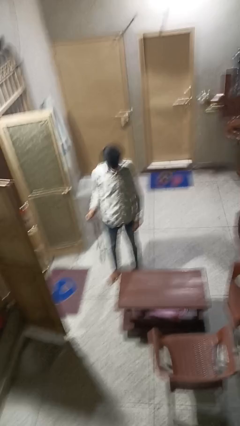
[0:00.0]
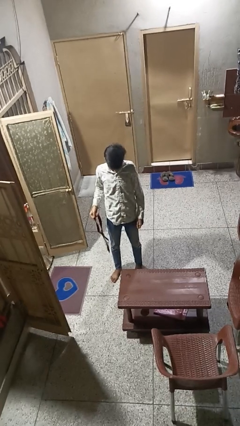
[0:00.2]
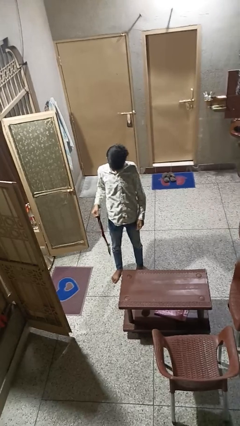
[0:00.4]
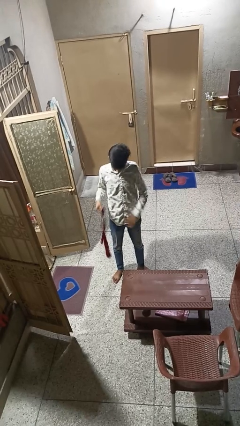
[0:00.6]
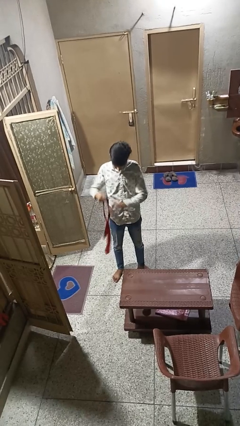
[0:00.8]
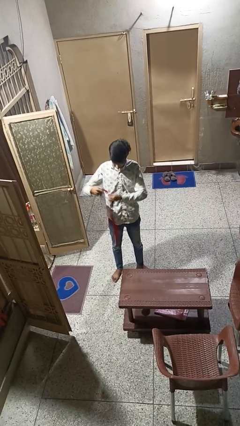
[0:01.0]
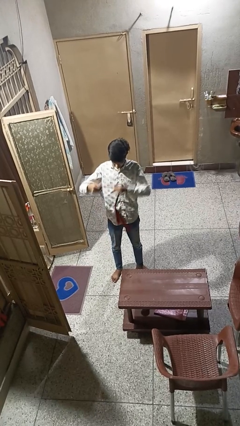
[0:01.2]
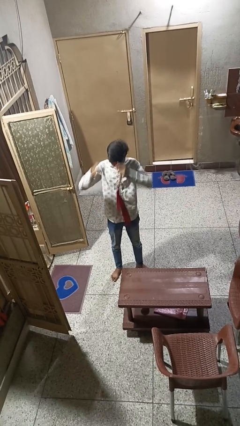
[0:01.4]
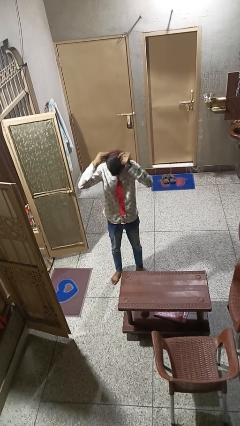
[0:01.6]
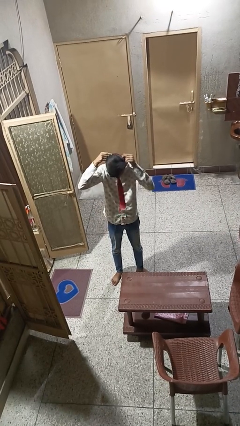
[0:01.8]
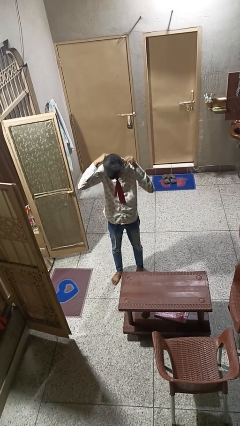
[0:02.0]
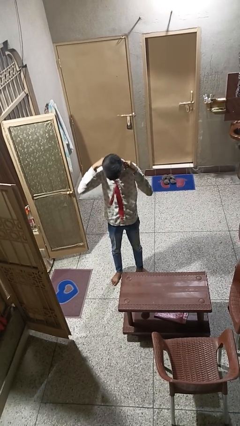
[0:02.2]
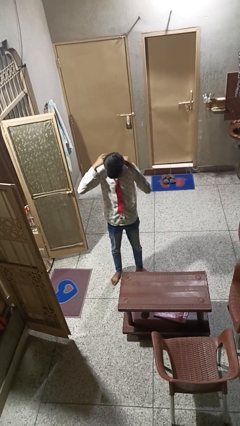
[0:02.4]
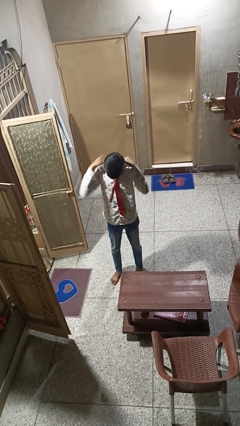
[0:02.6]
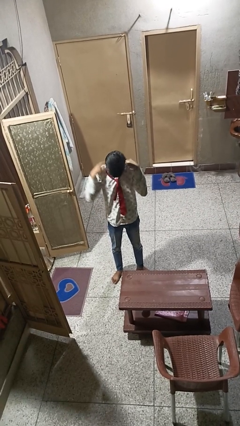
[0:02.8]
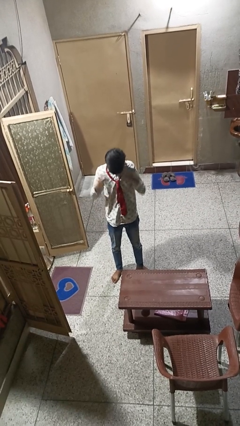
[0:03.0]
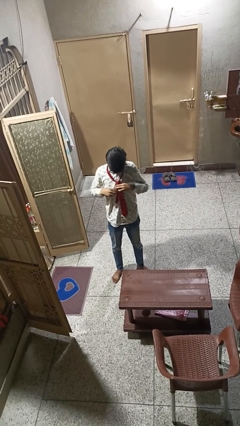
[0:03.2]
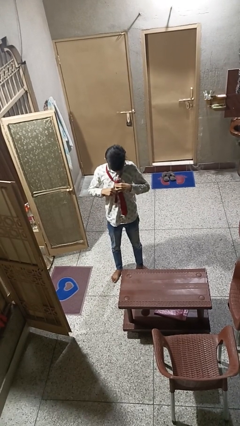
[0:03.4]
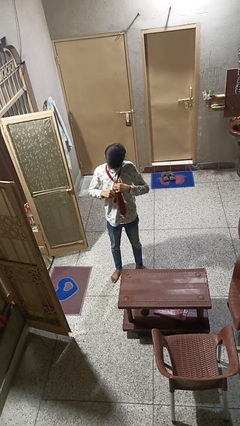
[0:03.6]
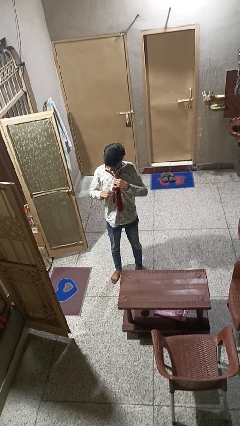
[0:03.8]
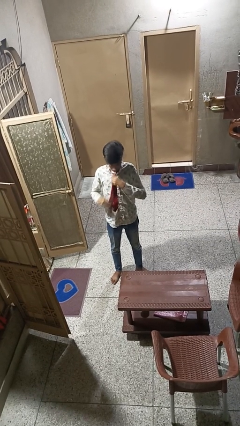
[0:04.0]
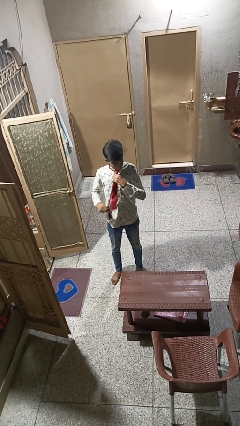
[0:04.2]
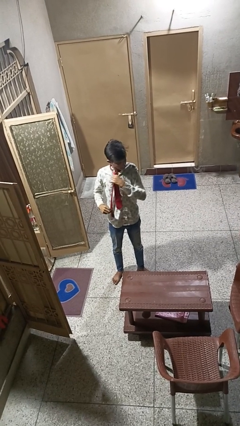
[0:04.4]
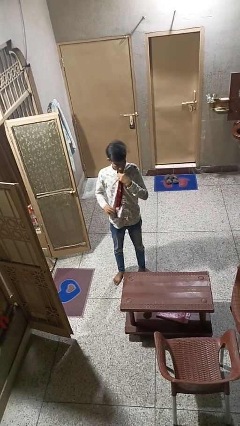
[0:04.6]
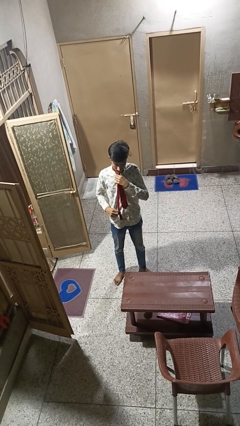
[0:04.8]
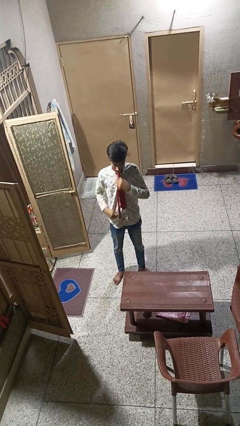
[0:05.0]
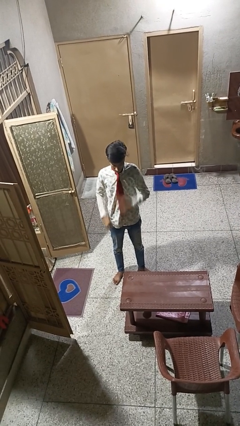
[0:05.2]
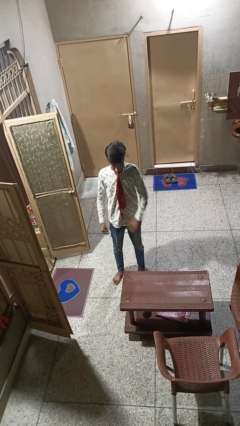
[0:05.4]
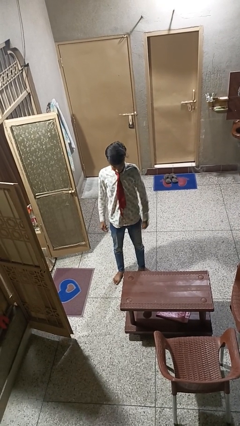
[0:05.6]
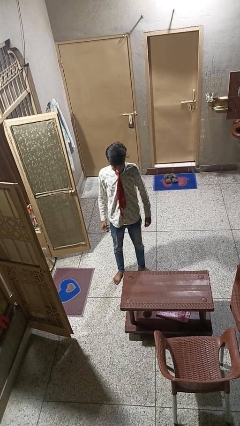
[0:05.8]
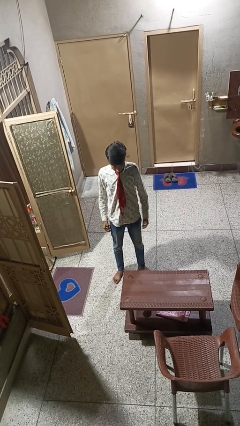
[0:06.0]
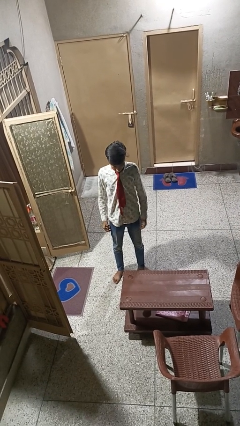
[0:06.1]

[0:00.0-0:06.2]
person puts on necktie

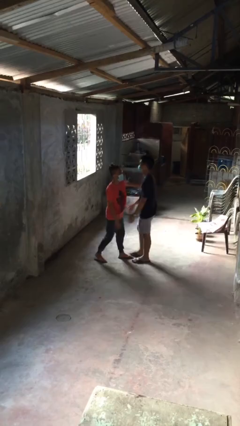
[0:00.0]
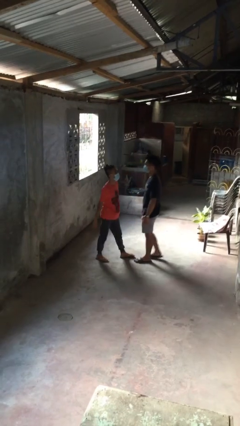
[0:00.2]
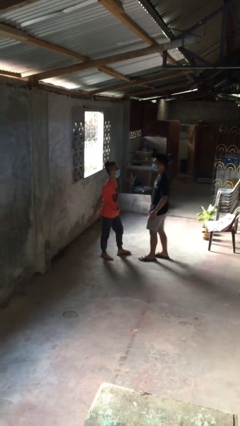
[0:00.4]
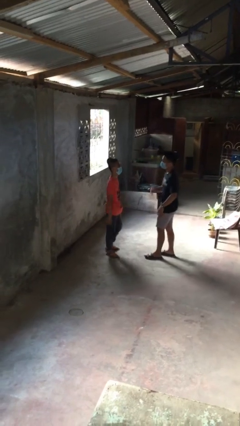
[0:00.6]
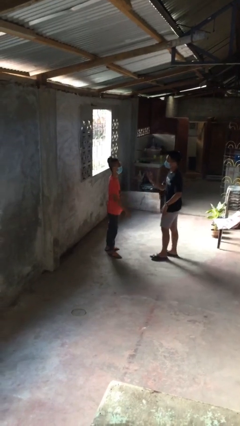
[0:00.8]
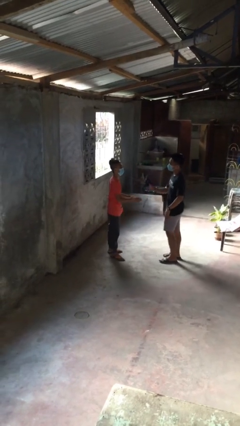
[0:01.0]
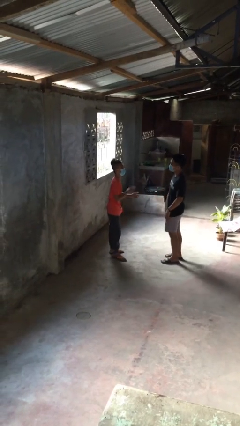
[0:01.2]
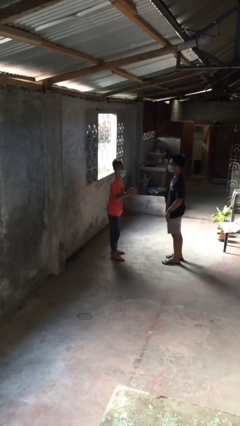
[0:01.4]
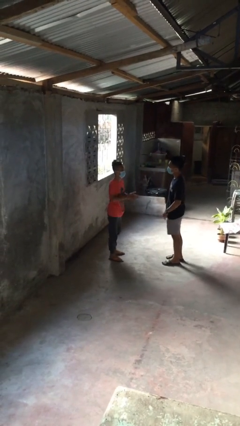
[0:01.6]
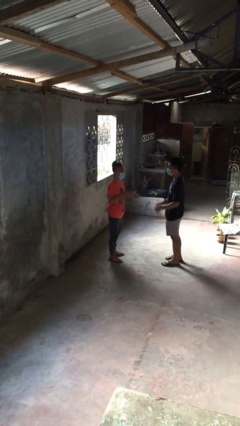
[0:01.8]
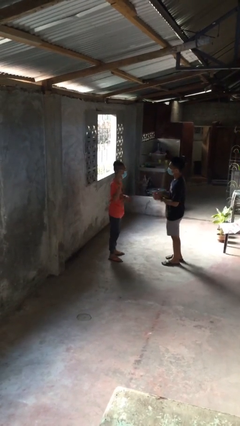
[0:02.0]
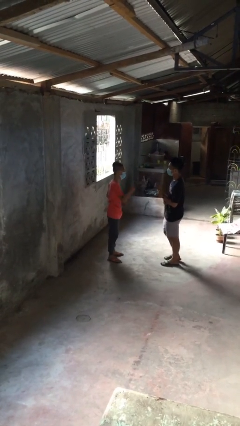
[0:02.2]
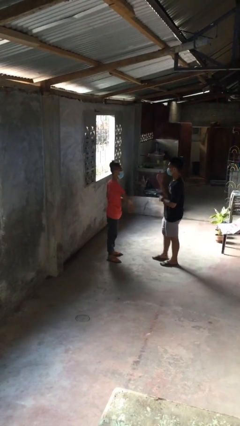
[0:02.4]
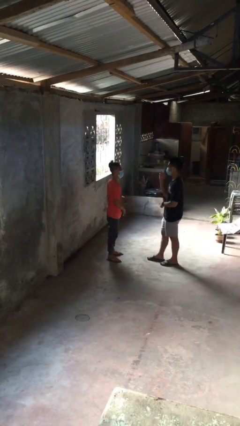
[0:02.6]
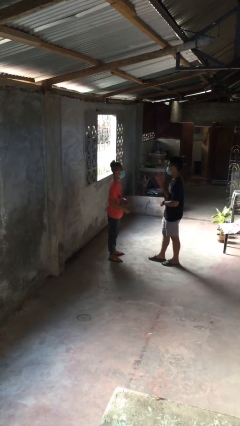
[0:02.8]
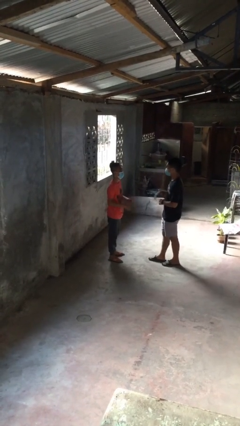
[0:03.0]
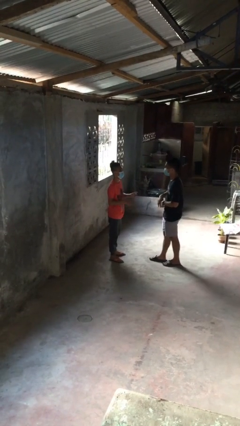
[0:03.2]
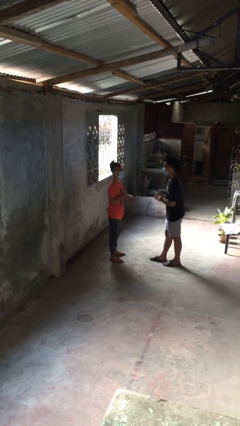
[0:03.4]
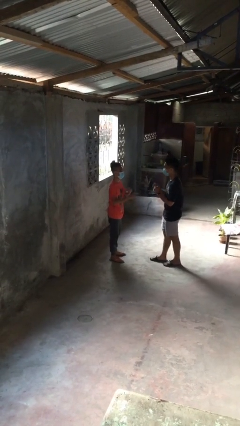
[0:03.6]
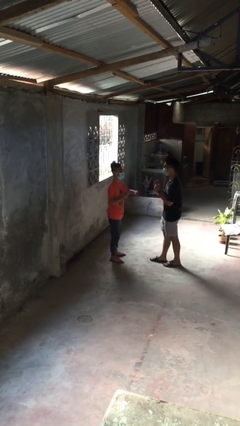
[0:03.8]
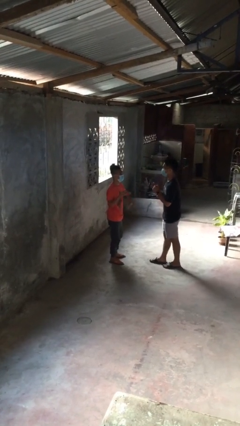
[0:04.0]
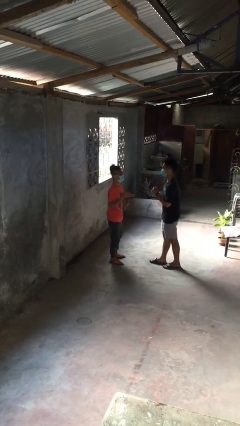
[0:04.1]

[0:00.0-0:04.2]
person talks to person

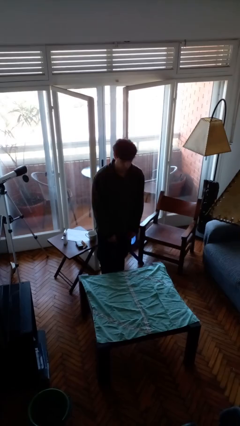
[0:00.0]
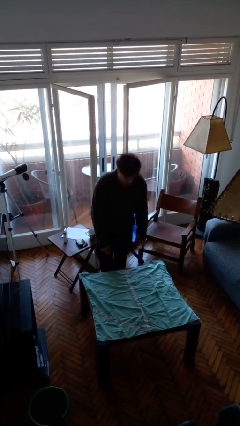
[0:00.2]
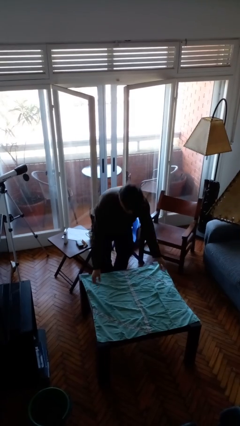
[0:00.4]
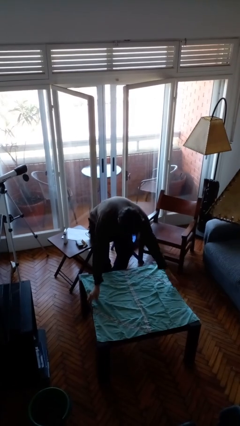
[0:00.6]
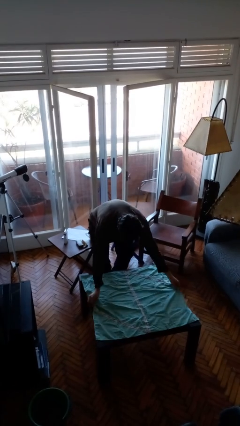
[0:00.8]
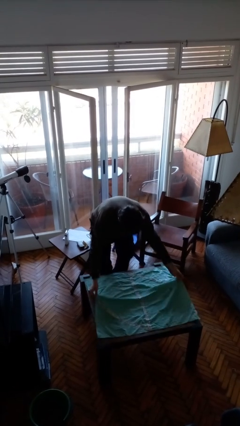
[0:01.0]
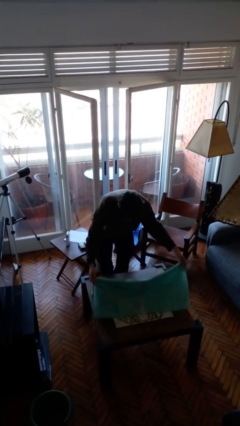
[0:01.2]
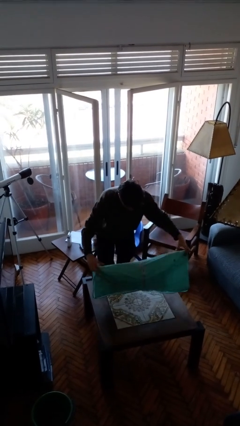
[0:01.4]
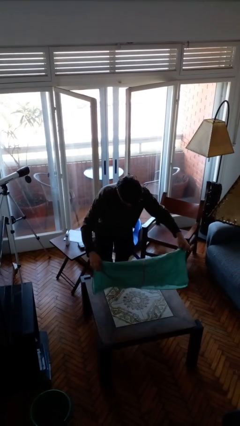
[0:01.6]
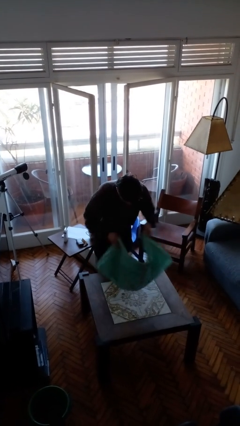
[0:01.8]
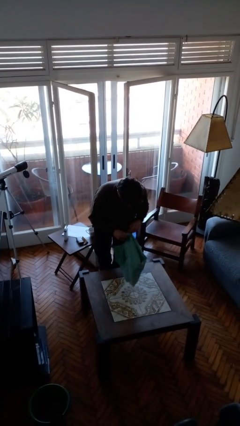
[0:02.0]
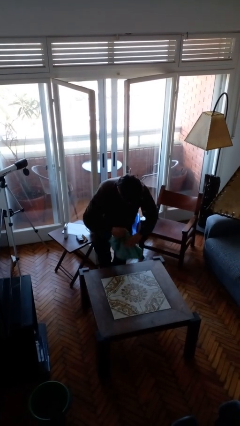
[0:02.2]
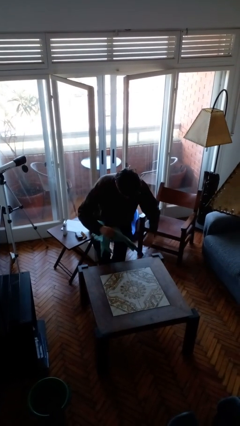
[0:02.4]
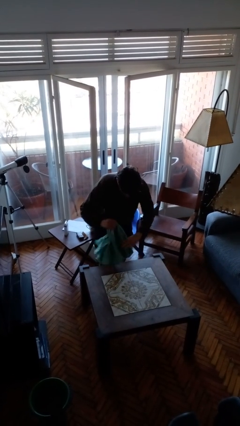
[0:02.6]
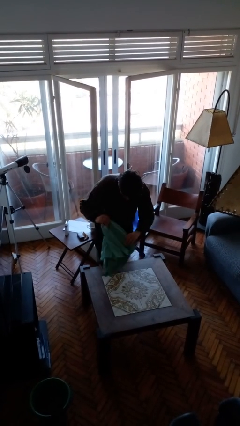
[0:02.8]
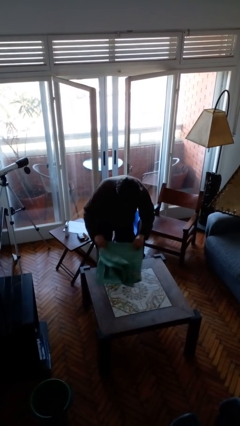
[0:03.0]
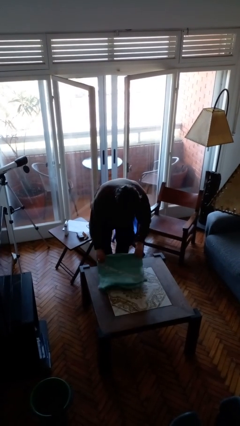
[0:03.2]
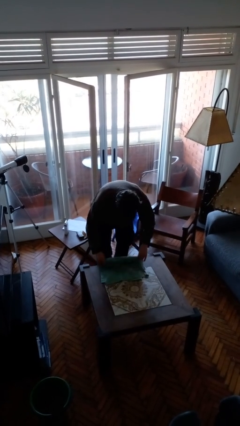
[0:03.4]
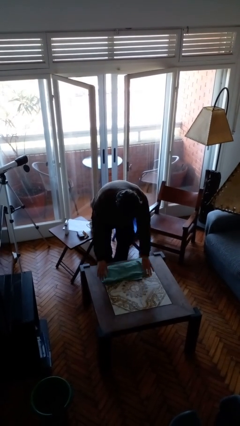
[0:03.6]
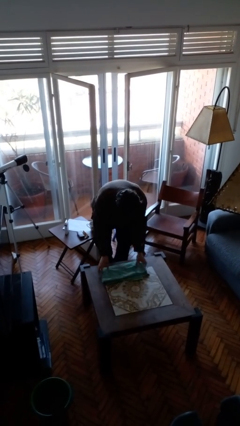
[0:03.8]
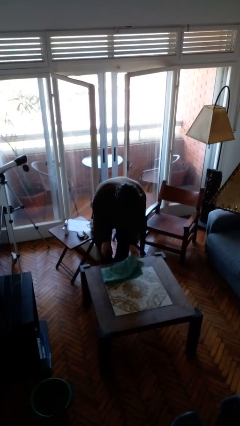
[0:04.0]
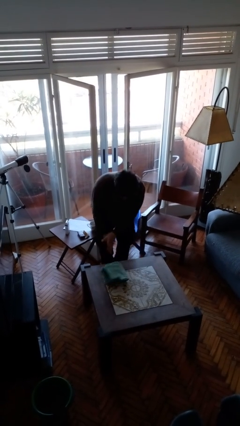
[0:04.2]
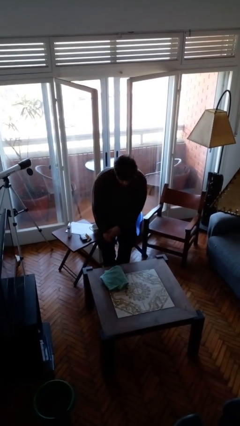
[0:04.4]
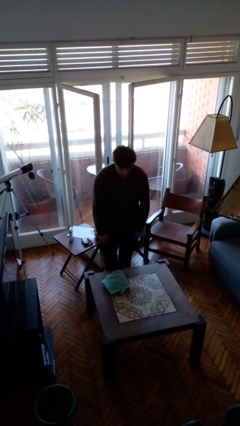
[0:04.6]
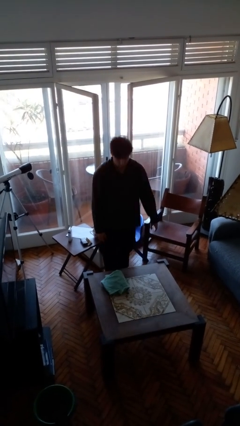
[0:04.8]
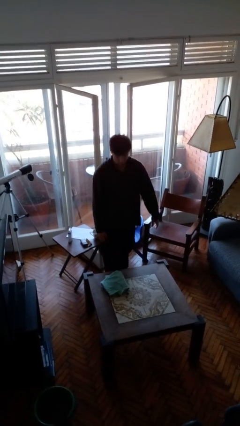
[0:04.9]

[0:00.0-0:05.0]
person folds tablecloth

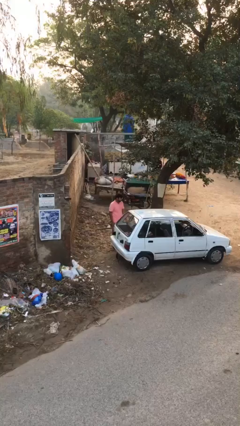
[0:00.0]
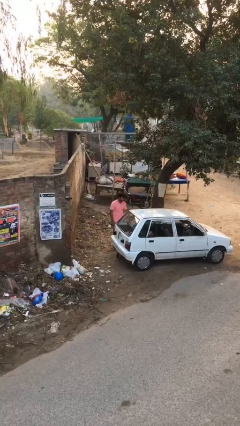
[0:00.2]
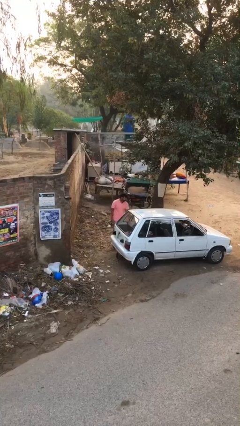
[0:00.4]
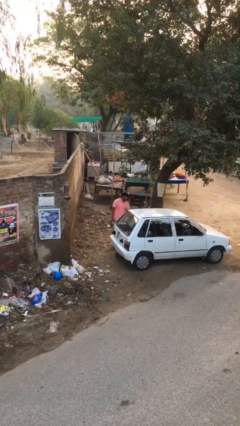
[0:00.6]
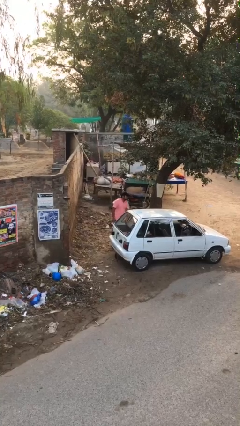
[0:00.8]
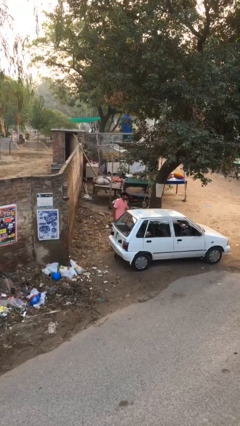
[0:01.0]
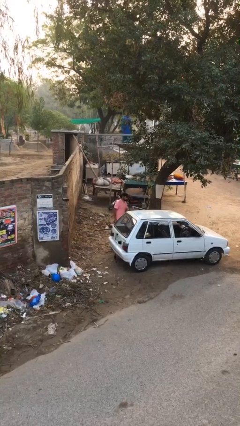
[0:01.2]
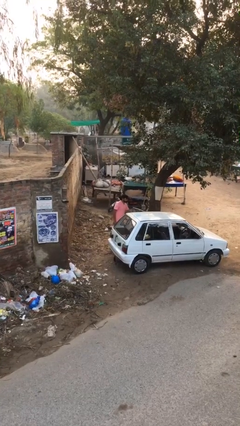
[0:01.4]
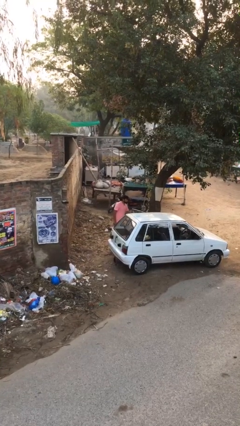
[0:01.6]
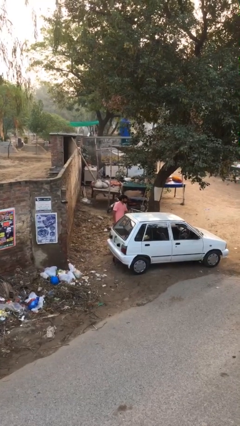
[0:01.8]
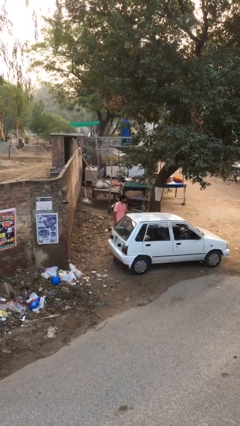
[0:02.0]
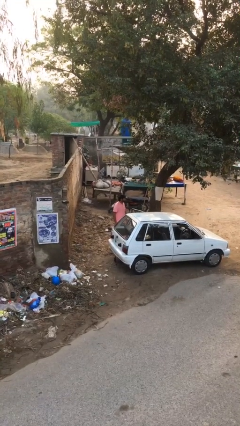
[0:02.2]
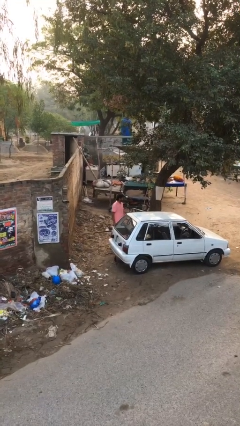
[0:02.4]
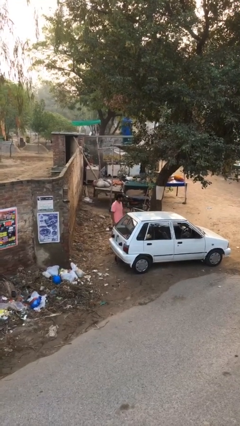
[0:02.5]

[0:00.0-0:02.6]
person opens car door
